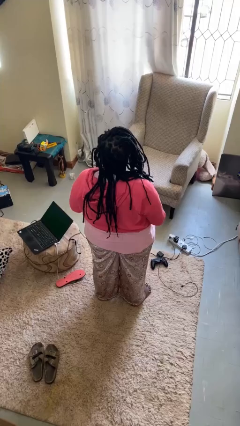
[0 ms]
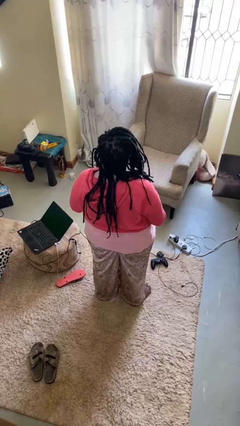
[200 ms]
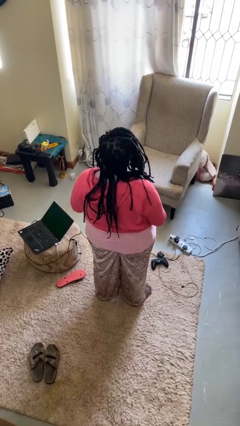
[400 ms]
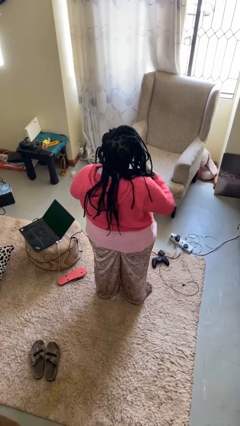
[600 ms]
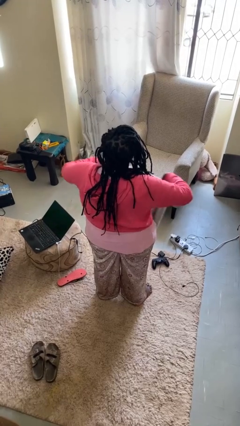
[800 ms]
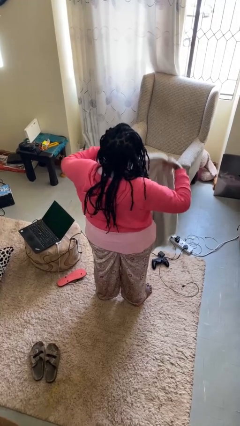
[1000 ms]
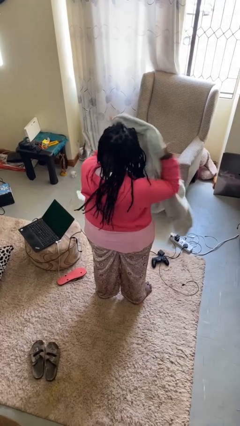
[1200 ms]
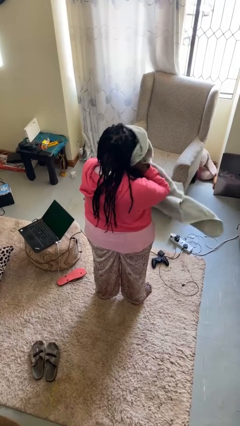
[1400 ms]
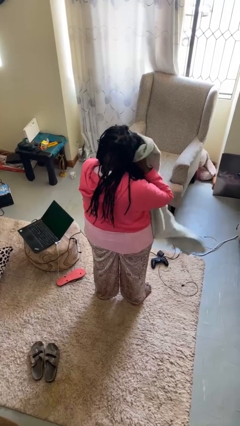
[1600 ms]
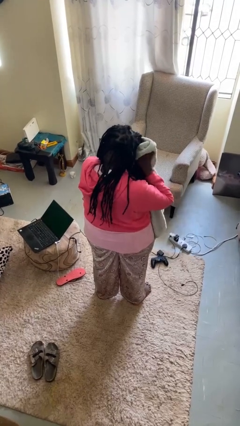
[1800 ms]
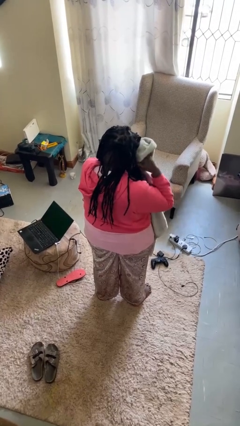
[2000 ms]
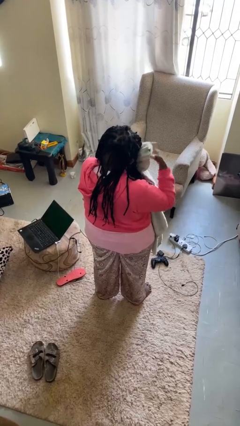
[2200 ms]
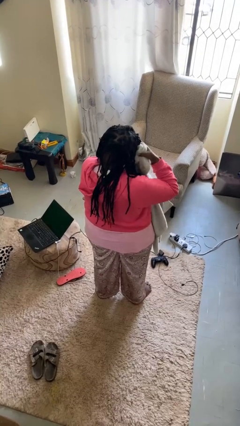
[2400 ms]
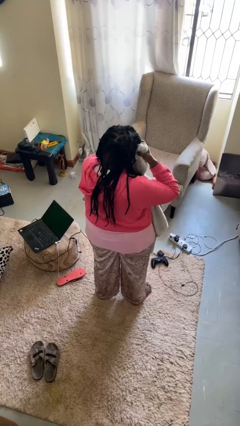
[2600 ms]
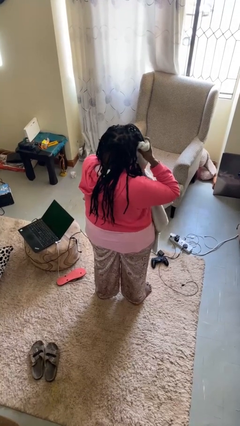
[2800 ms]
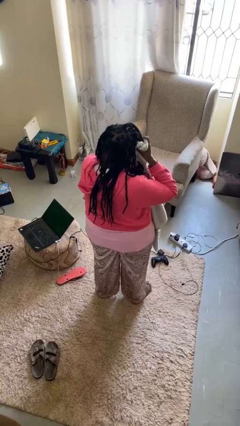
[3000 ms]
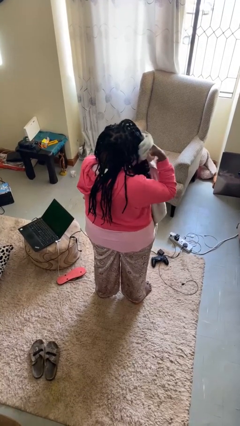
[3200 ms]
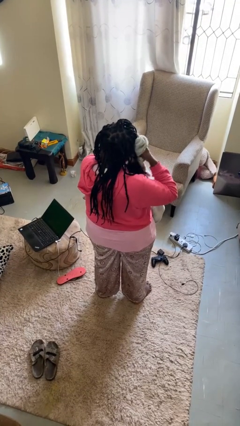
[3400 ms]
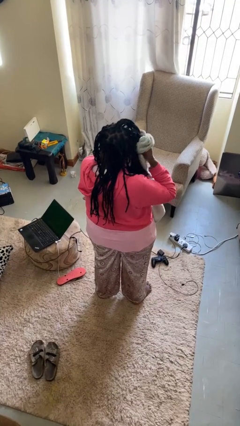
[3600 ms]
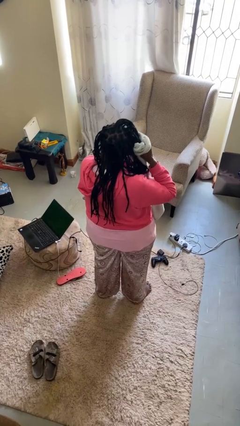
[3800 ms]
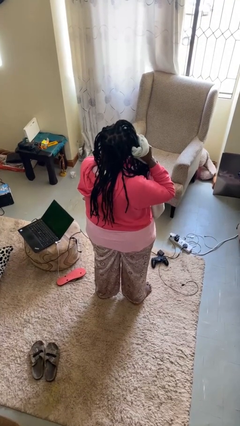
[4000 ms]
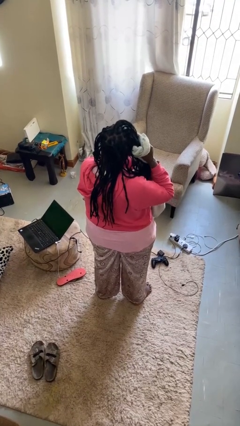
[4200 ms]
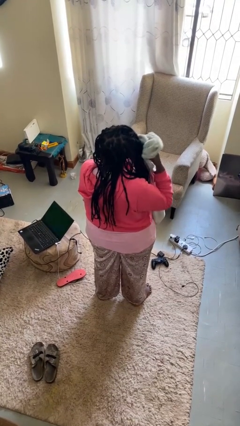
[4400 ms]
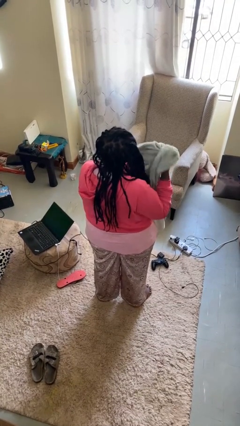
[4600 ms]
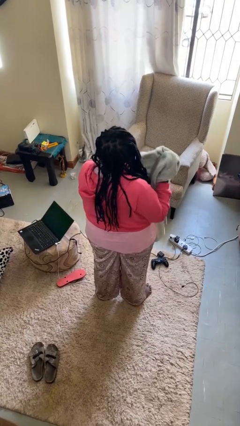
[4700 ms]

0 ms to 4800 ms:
person dries hair with towel

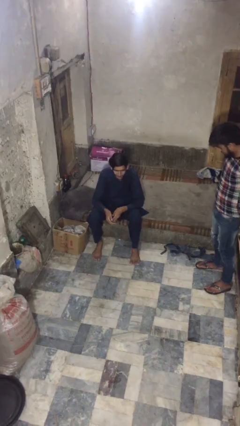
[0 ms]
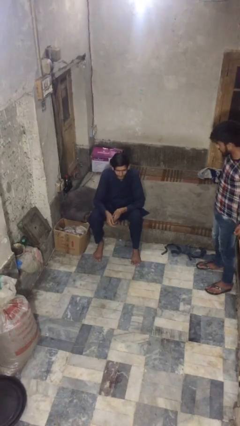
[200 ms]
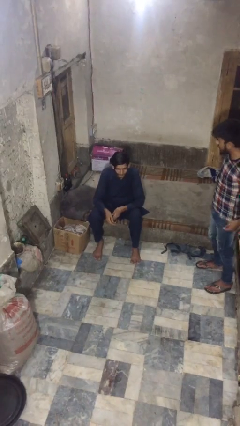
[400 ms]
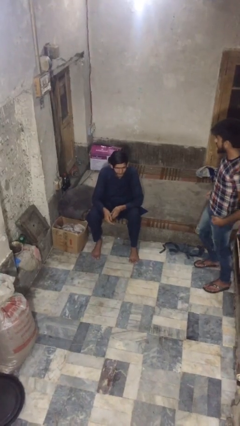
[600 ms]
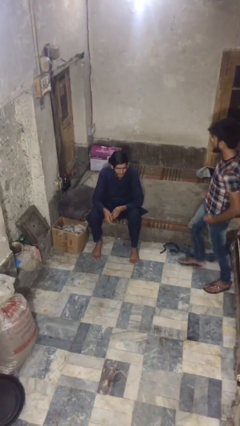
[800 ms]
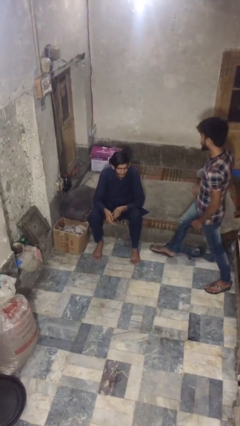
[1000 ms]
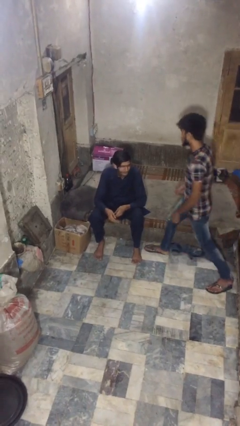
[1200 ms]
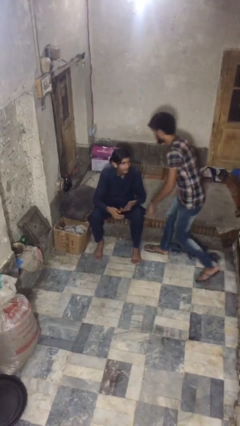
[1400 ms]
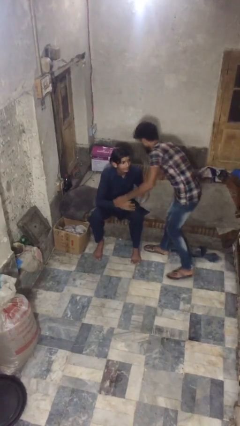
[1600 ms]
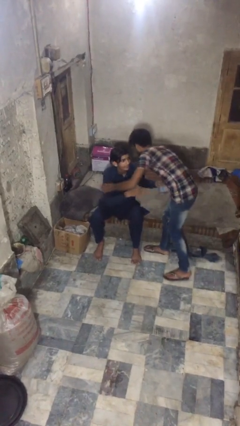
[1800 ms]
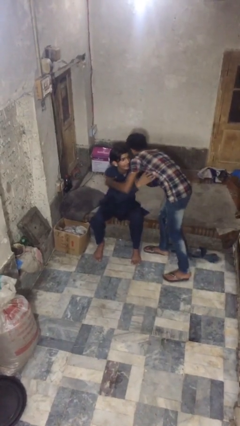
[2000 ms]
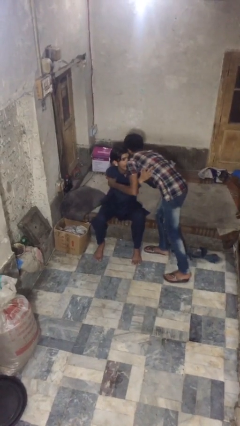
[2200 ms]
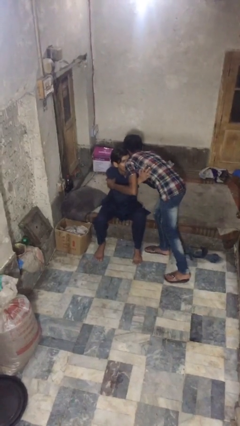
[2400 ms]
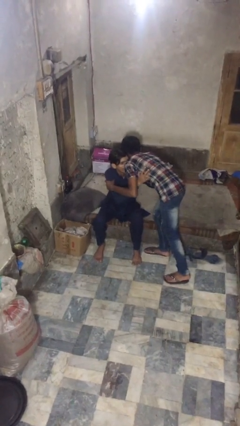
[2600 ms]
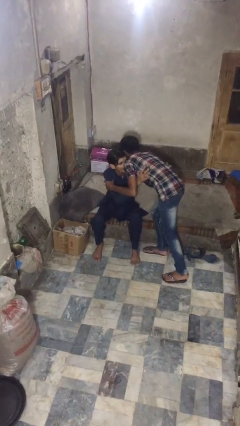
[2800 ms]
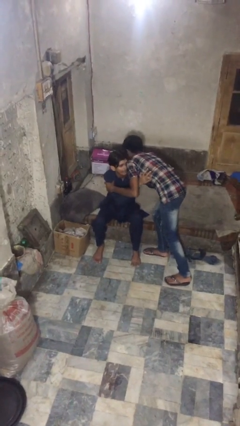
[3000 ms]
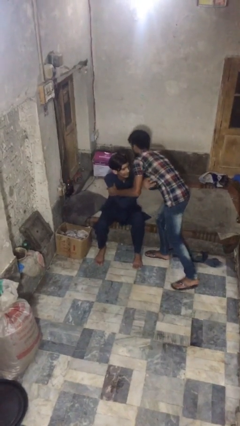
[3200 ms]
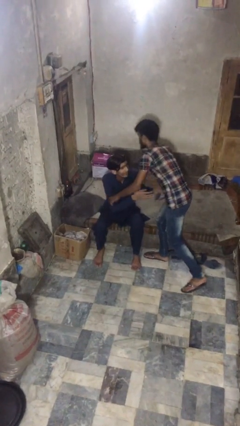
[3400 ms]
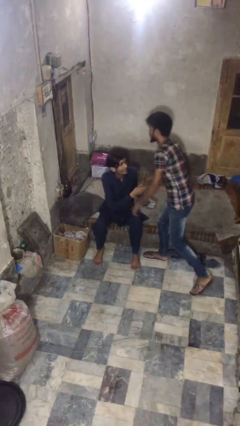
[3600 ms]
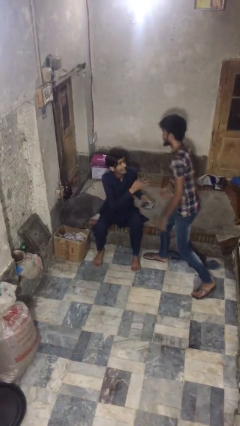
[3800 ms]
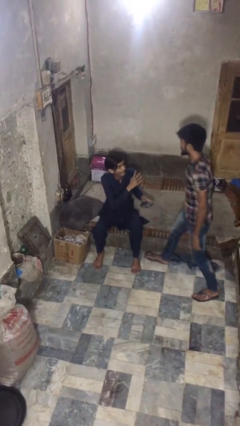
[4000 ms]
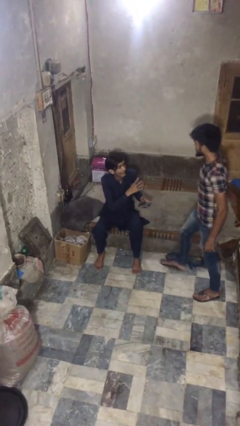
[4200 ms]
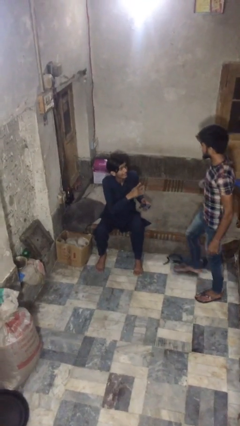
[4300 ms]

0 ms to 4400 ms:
person embraces person

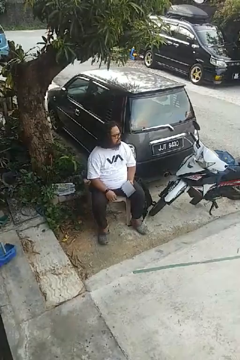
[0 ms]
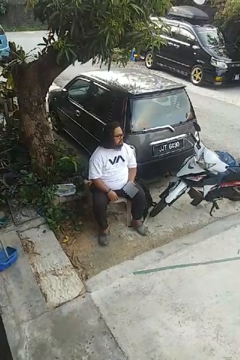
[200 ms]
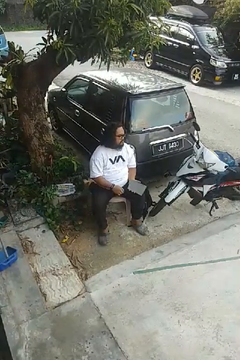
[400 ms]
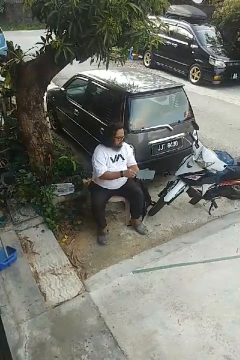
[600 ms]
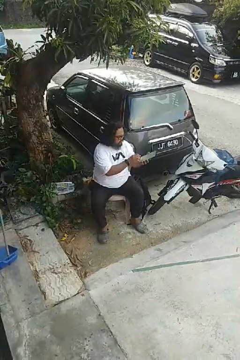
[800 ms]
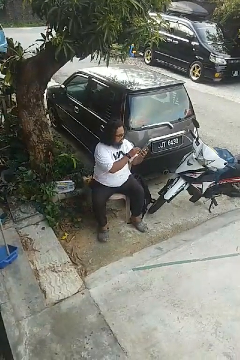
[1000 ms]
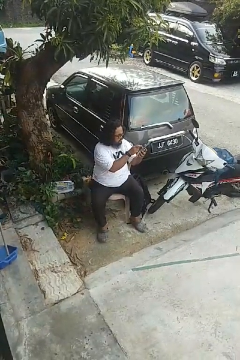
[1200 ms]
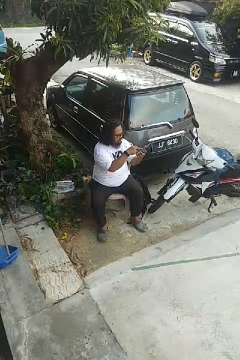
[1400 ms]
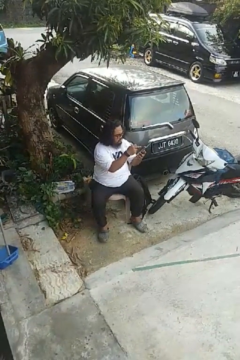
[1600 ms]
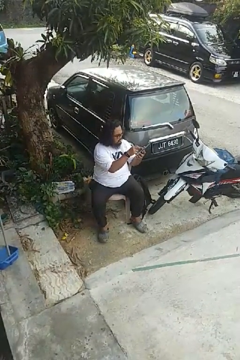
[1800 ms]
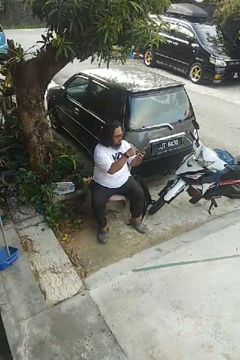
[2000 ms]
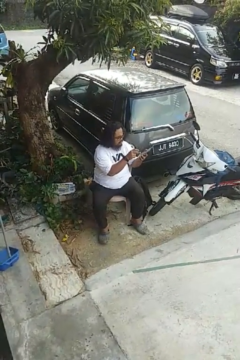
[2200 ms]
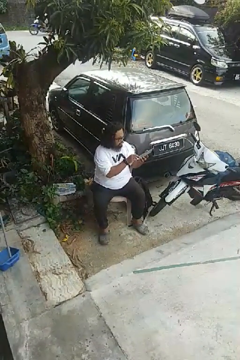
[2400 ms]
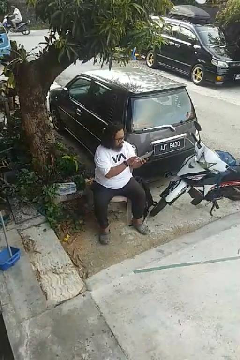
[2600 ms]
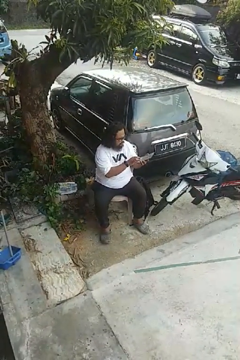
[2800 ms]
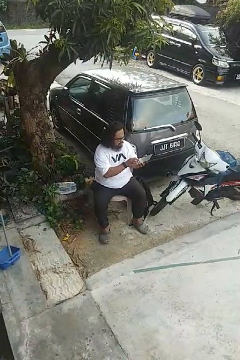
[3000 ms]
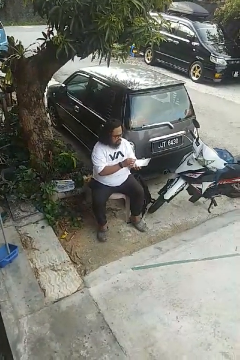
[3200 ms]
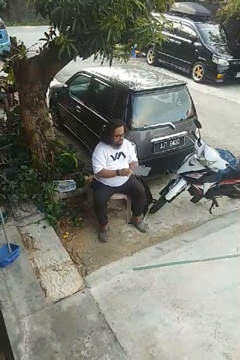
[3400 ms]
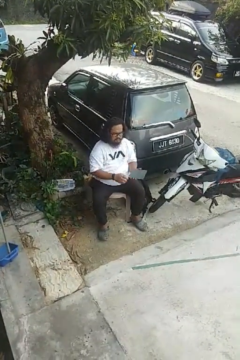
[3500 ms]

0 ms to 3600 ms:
person interacts with tablet

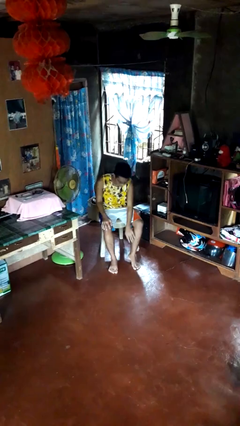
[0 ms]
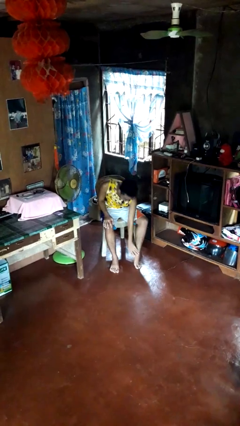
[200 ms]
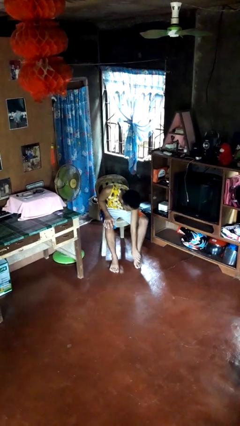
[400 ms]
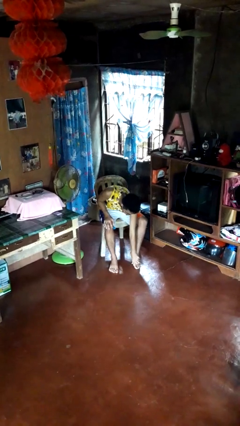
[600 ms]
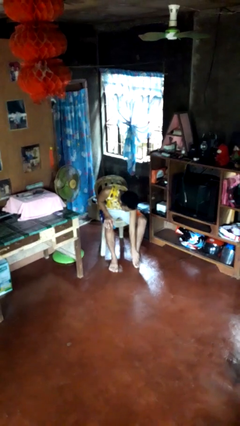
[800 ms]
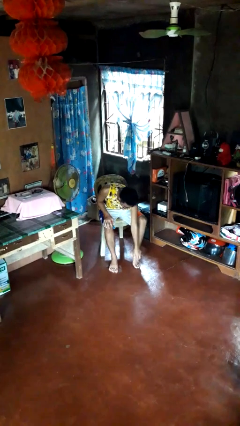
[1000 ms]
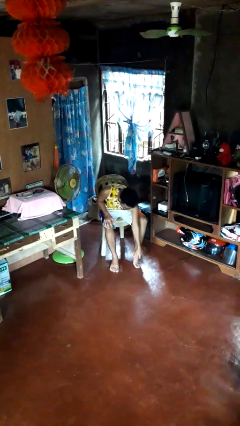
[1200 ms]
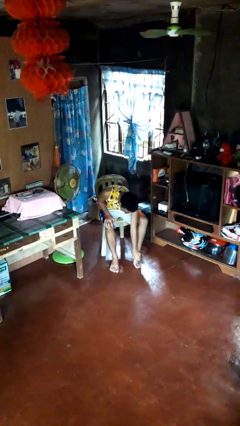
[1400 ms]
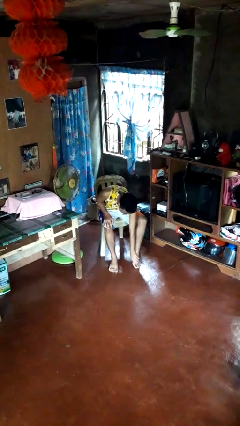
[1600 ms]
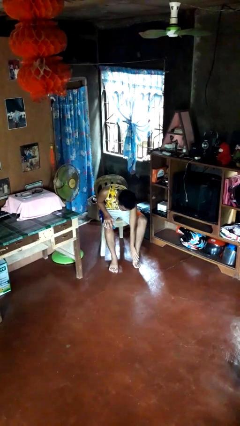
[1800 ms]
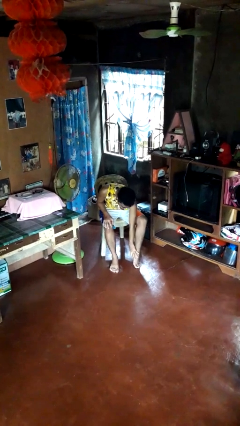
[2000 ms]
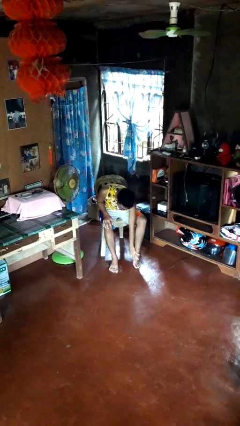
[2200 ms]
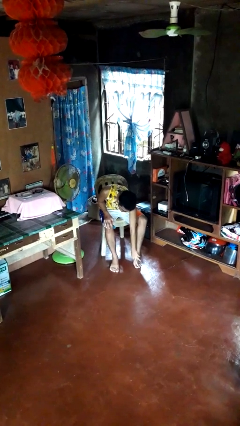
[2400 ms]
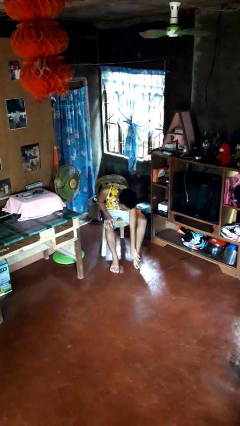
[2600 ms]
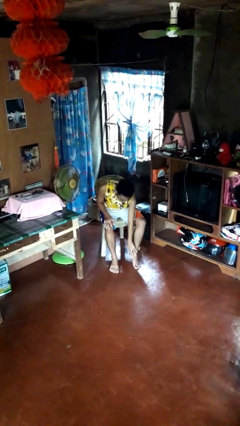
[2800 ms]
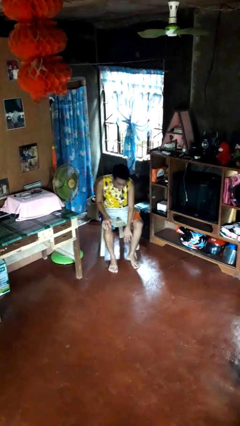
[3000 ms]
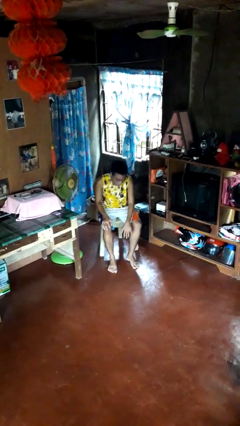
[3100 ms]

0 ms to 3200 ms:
person rubs foot

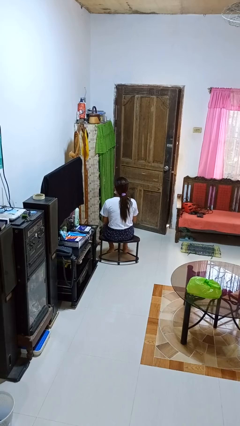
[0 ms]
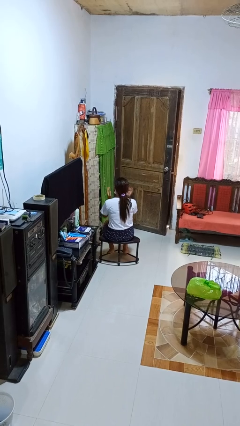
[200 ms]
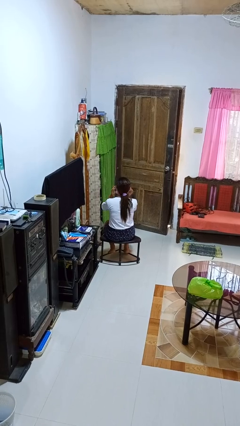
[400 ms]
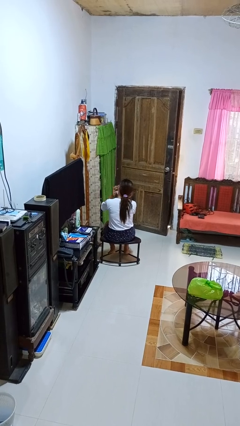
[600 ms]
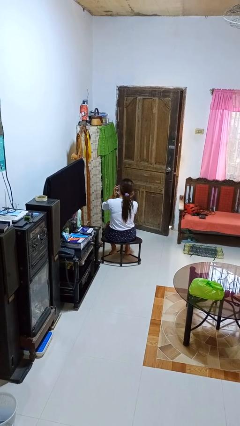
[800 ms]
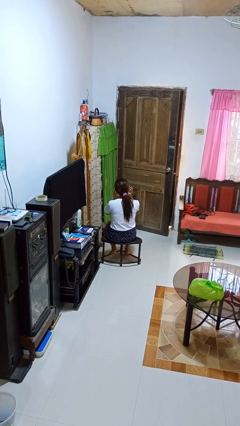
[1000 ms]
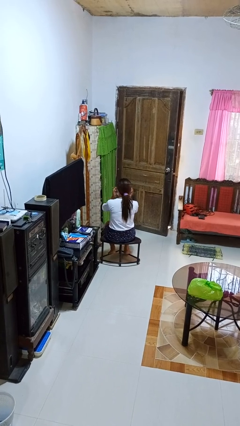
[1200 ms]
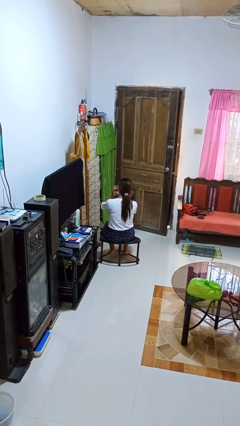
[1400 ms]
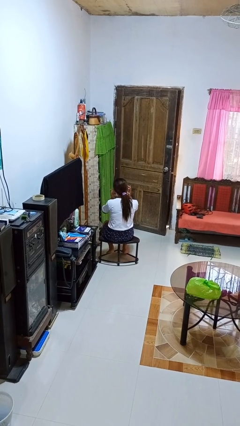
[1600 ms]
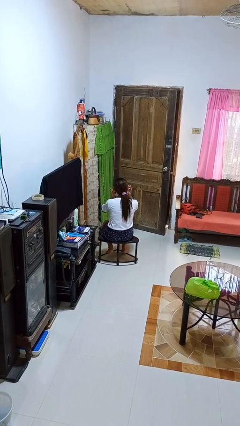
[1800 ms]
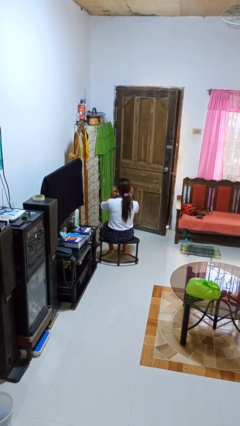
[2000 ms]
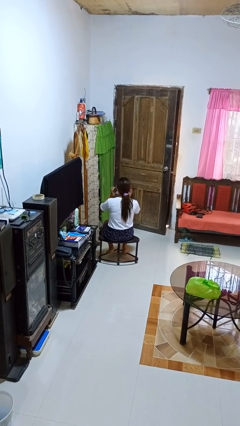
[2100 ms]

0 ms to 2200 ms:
person puts fingers in ear
